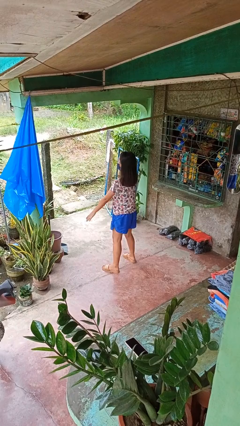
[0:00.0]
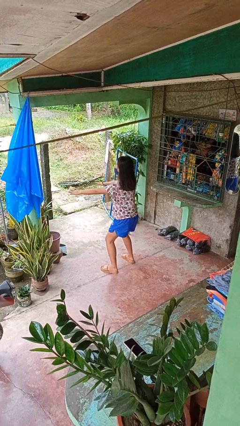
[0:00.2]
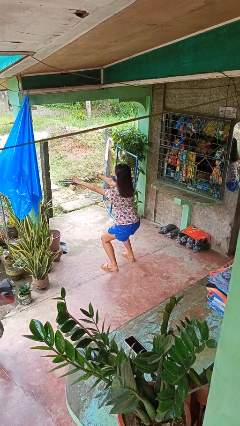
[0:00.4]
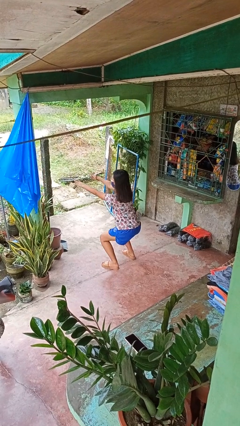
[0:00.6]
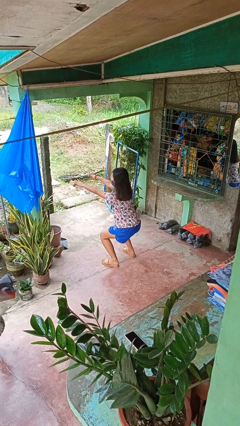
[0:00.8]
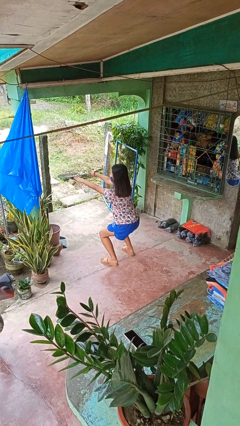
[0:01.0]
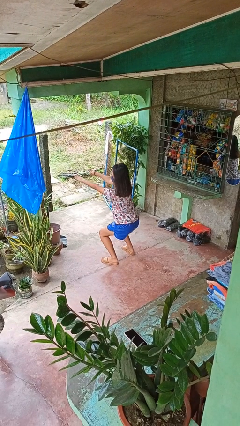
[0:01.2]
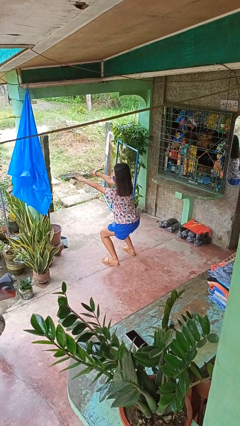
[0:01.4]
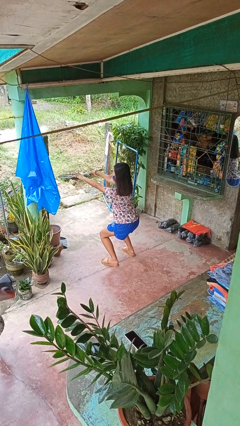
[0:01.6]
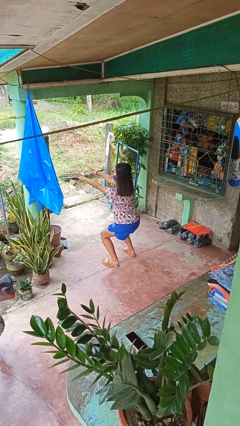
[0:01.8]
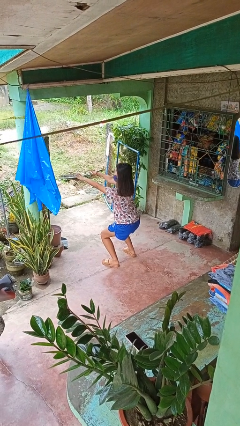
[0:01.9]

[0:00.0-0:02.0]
person squats

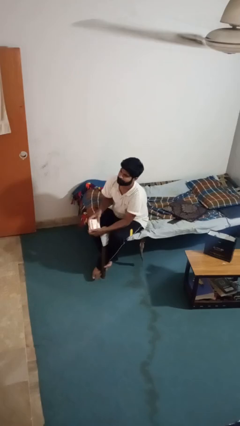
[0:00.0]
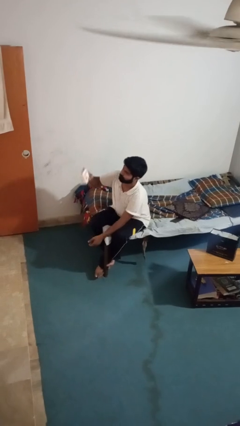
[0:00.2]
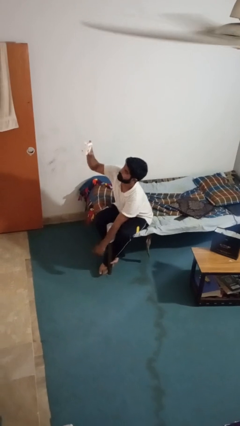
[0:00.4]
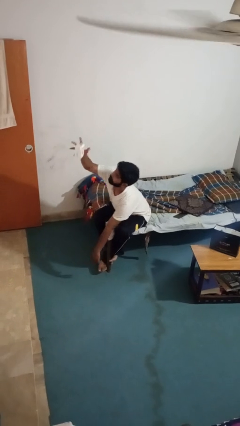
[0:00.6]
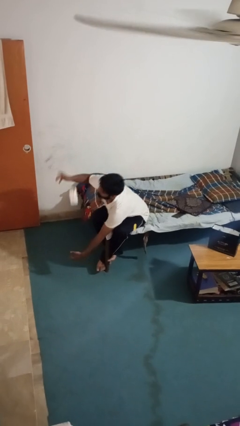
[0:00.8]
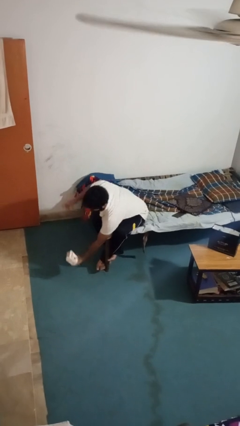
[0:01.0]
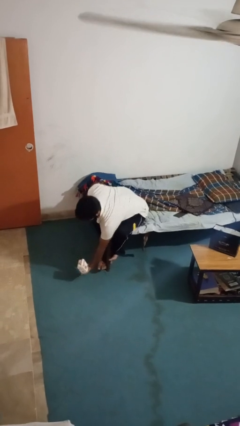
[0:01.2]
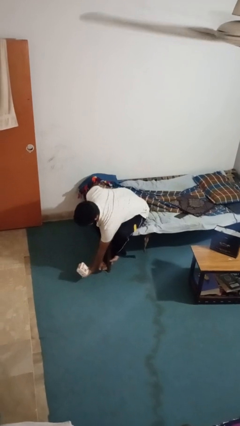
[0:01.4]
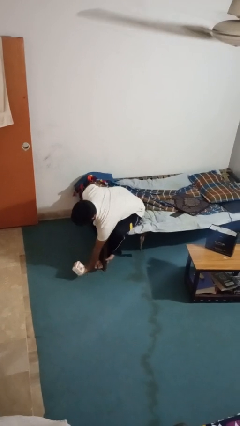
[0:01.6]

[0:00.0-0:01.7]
person drops object

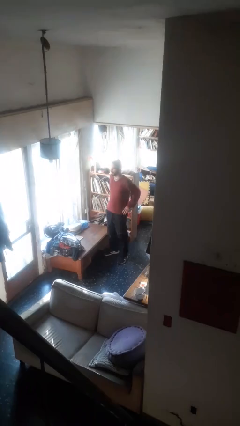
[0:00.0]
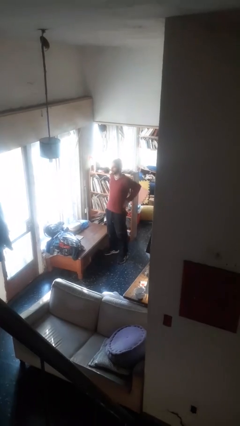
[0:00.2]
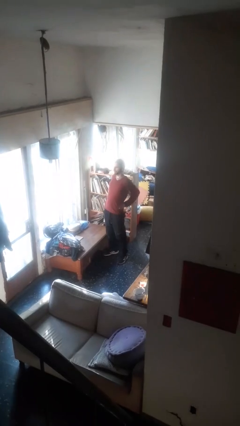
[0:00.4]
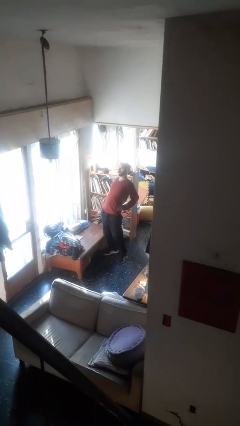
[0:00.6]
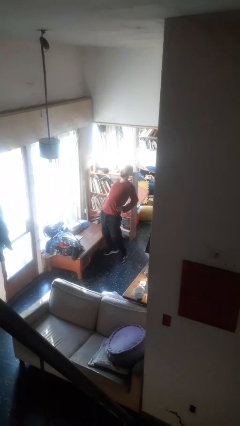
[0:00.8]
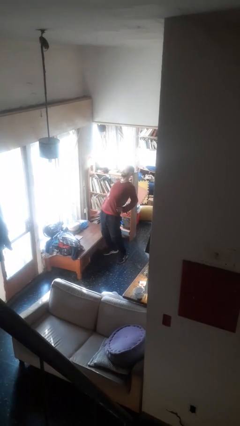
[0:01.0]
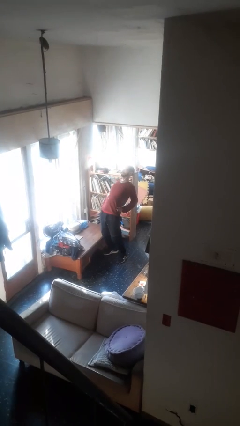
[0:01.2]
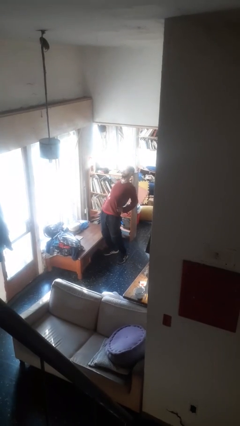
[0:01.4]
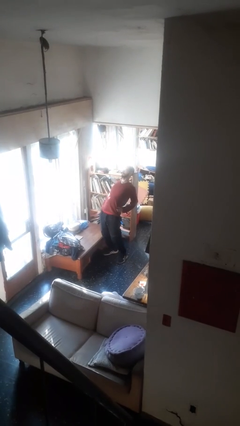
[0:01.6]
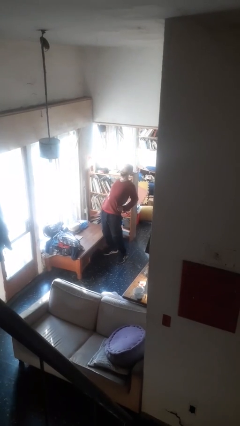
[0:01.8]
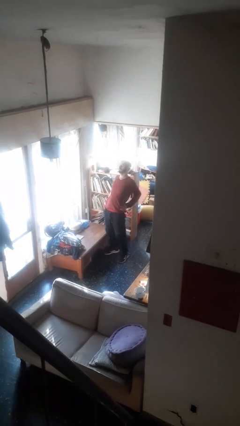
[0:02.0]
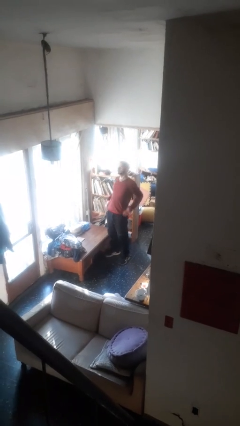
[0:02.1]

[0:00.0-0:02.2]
person stretches back

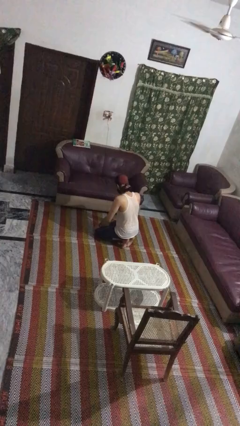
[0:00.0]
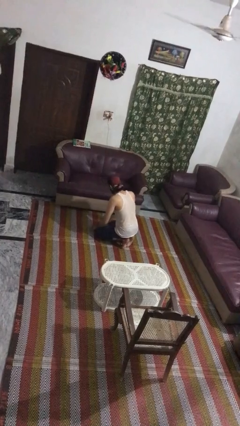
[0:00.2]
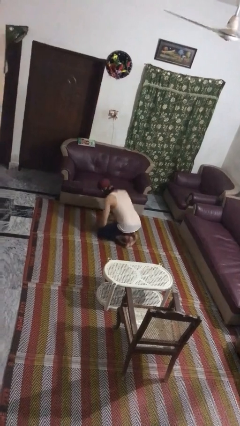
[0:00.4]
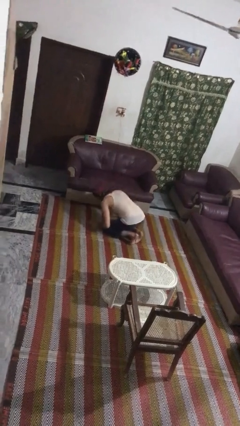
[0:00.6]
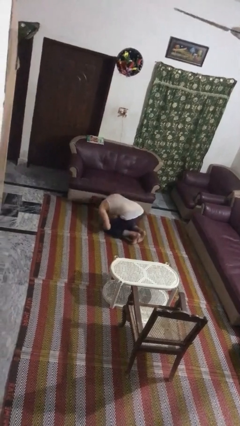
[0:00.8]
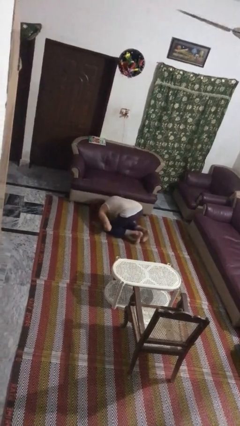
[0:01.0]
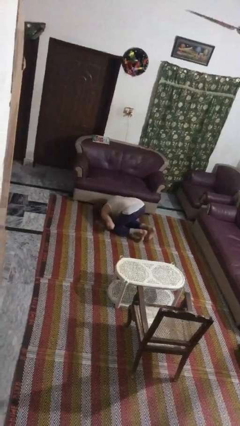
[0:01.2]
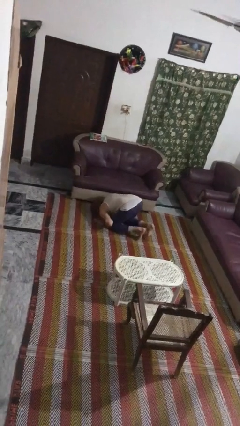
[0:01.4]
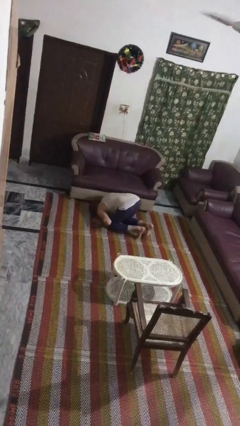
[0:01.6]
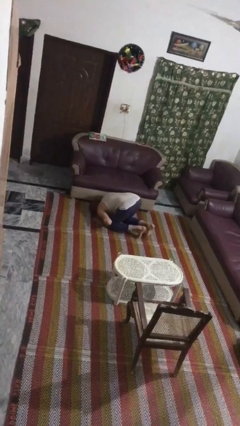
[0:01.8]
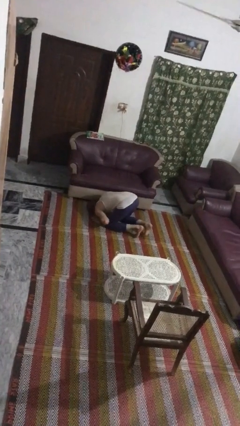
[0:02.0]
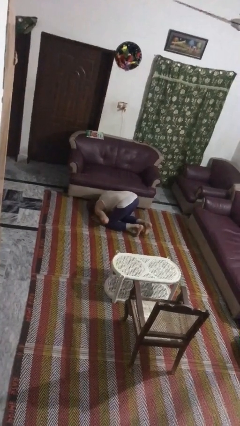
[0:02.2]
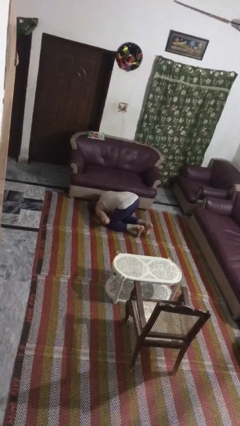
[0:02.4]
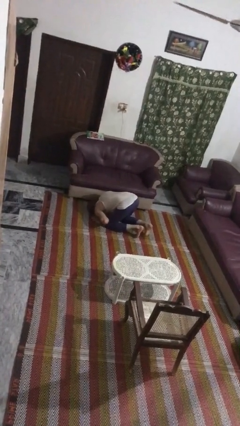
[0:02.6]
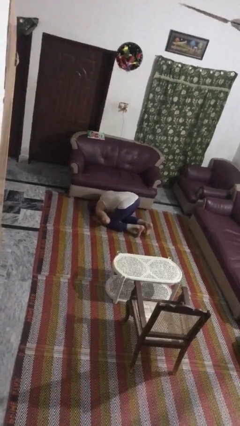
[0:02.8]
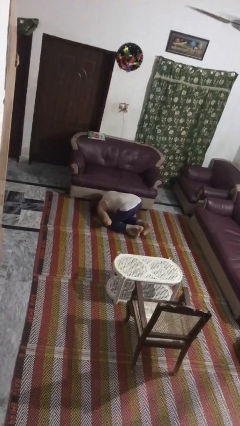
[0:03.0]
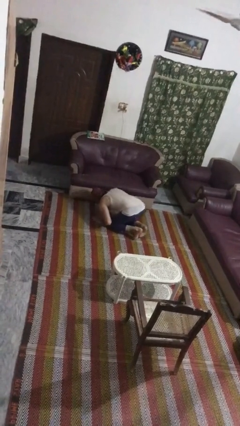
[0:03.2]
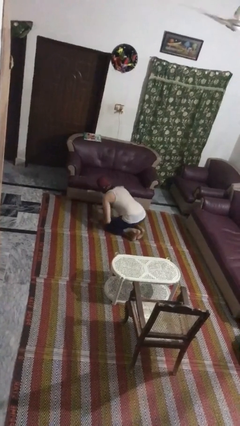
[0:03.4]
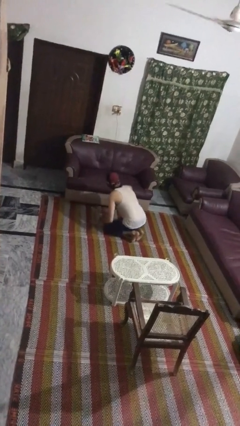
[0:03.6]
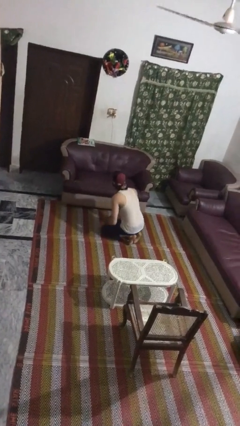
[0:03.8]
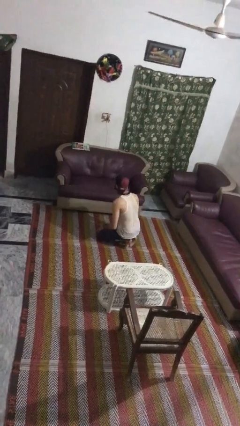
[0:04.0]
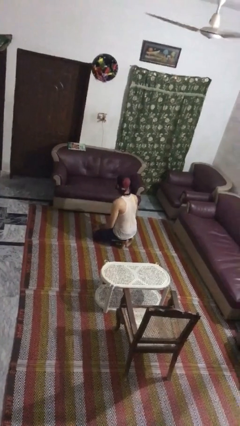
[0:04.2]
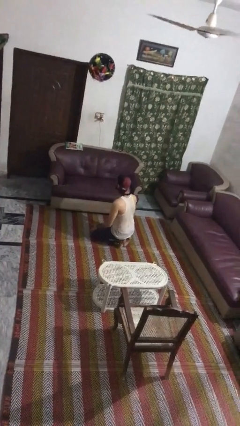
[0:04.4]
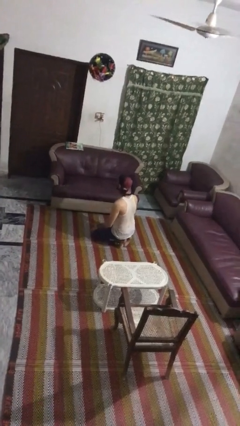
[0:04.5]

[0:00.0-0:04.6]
person searches under couch

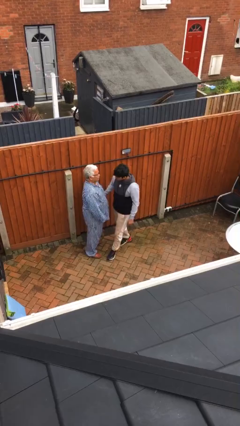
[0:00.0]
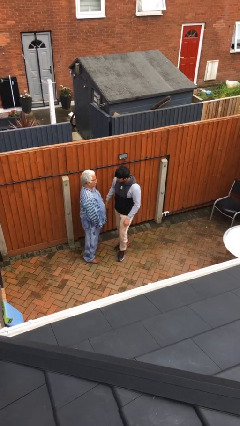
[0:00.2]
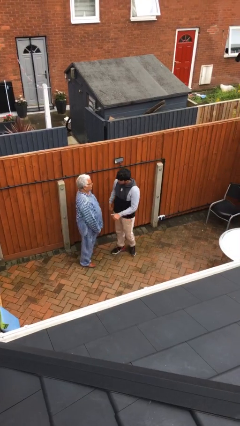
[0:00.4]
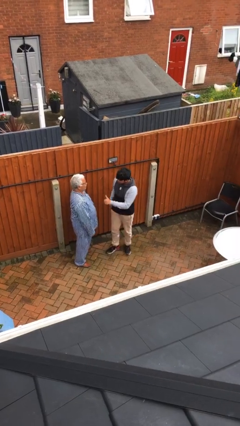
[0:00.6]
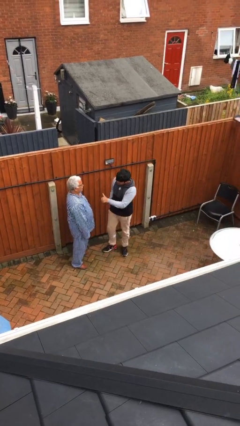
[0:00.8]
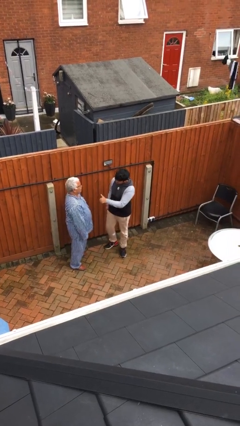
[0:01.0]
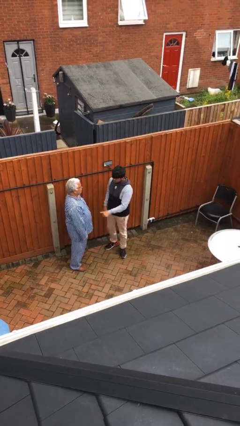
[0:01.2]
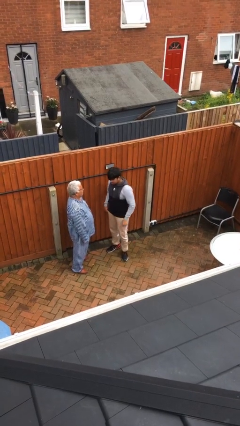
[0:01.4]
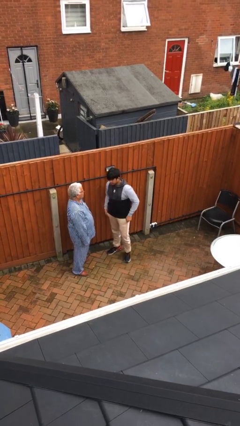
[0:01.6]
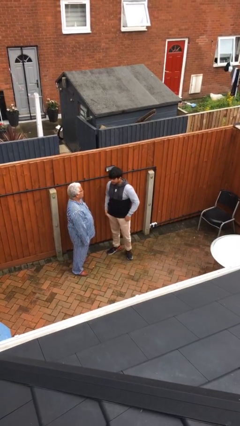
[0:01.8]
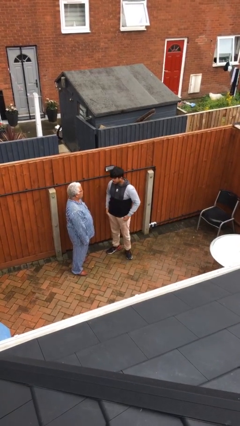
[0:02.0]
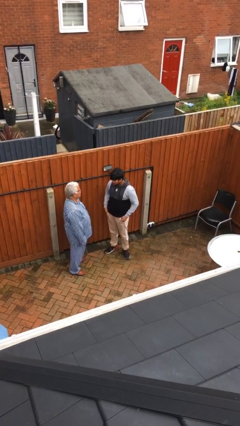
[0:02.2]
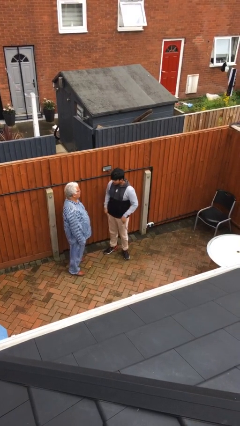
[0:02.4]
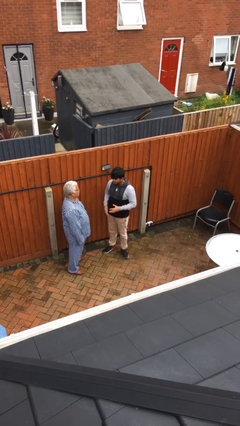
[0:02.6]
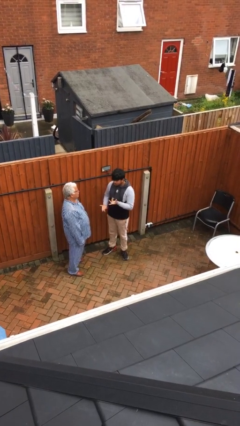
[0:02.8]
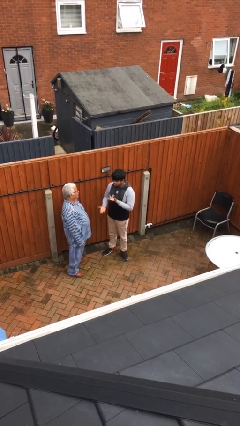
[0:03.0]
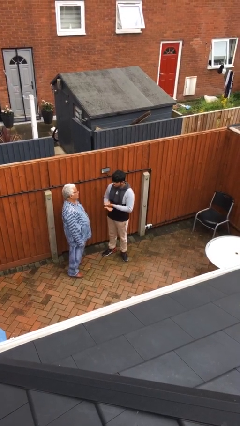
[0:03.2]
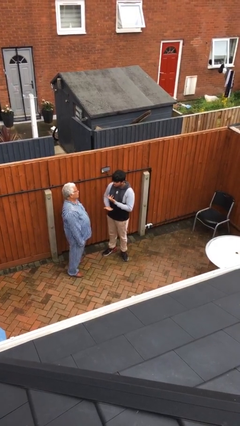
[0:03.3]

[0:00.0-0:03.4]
person talks to person

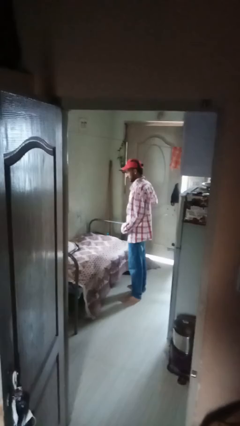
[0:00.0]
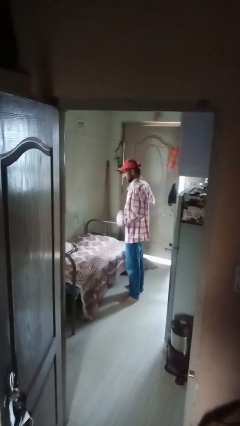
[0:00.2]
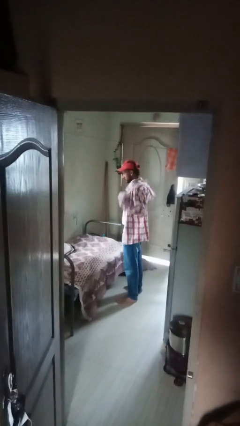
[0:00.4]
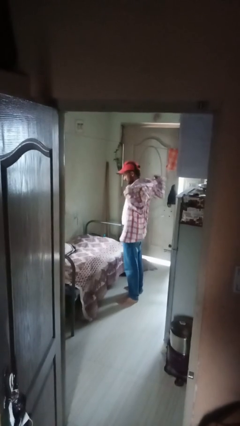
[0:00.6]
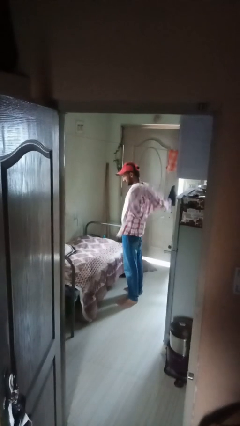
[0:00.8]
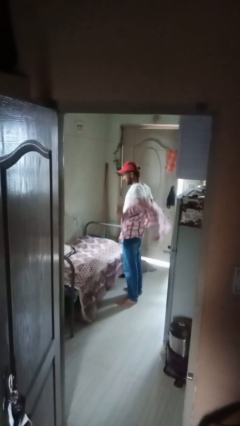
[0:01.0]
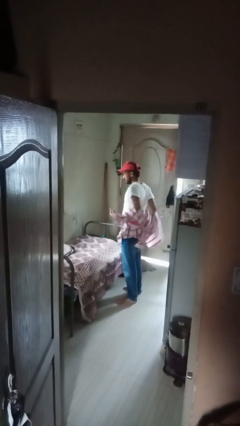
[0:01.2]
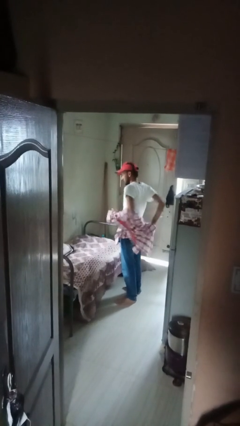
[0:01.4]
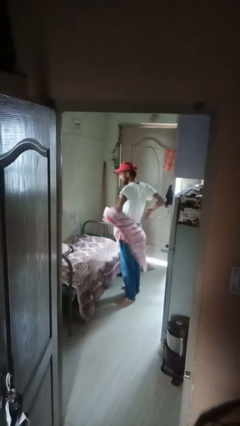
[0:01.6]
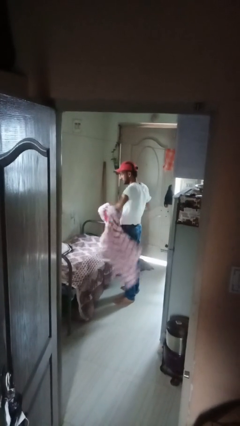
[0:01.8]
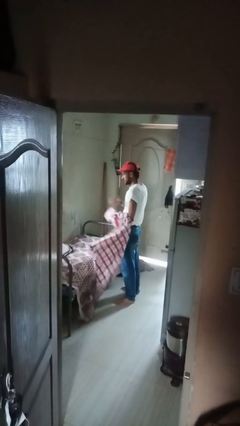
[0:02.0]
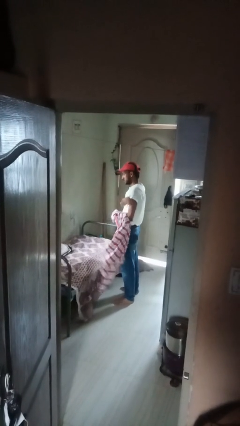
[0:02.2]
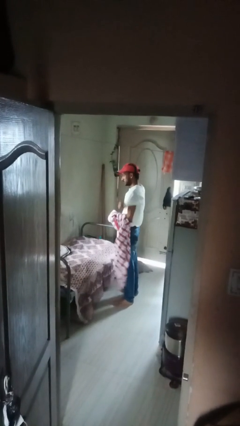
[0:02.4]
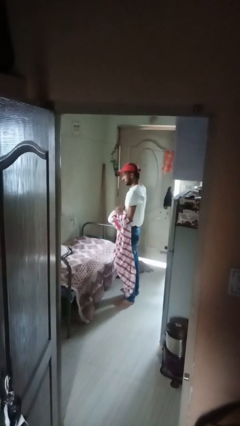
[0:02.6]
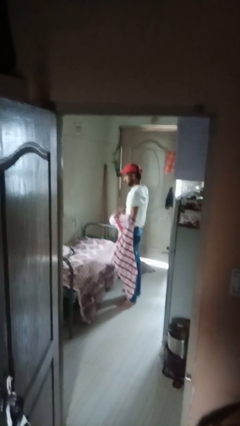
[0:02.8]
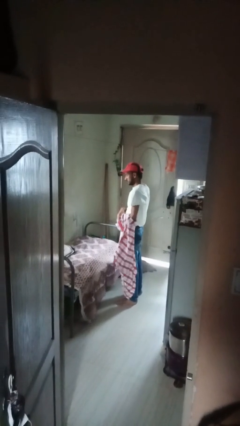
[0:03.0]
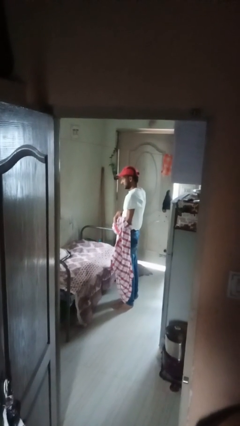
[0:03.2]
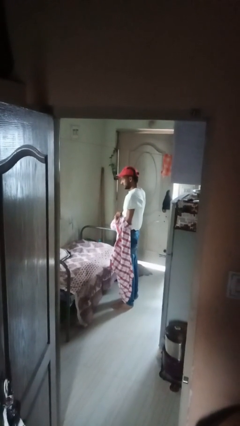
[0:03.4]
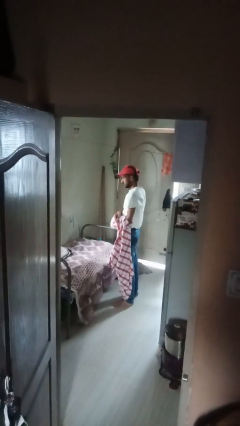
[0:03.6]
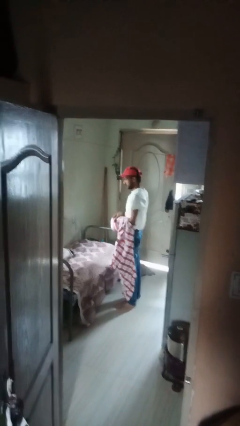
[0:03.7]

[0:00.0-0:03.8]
person takes off shirt
